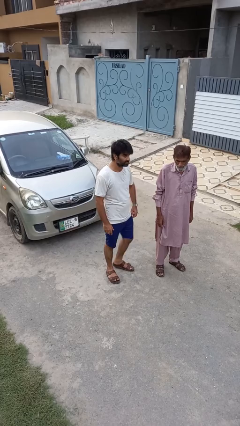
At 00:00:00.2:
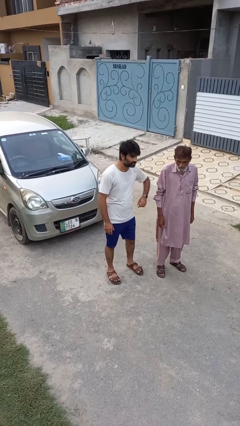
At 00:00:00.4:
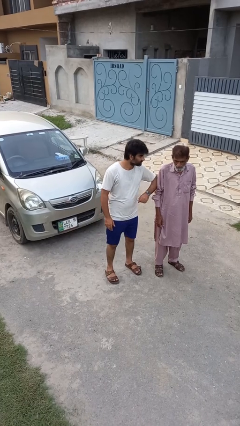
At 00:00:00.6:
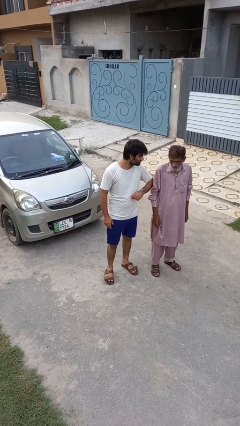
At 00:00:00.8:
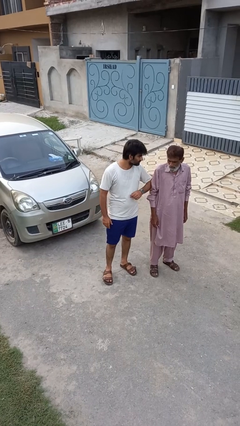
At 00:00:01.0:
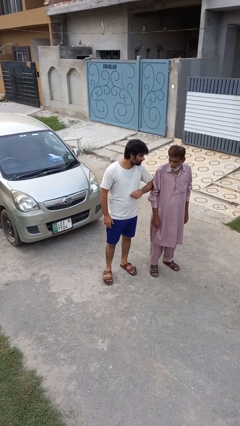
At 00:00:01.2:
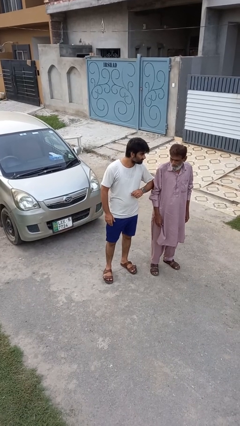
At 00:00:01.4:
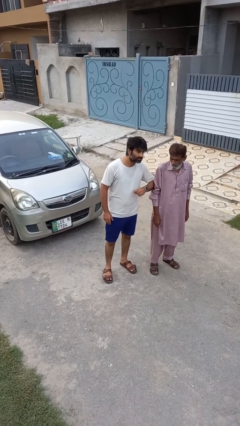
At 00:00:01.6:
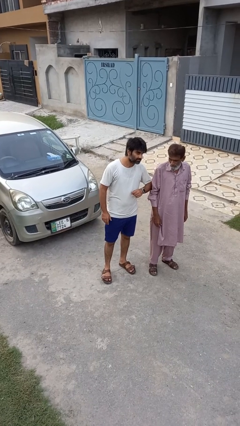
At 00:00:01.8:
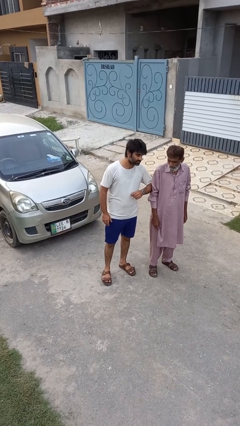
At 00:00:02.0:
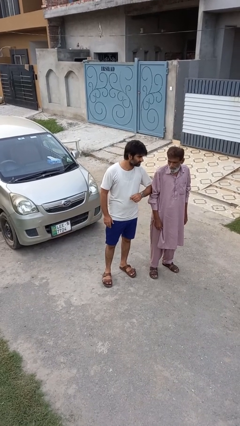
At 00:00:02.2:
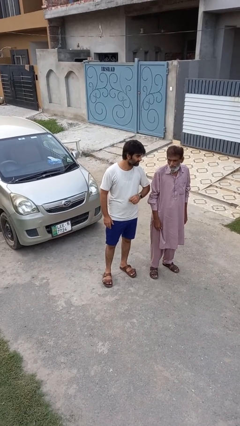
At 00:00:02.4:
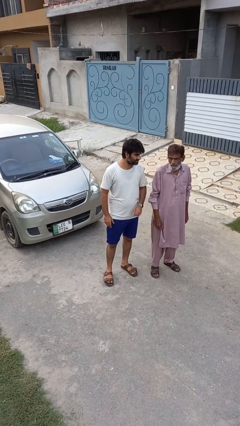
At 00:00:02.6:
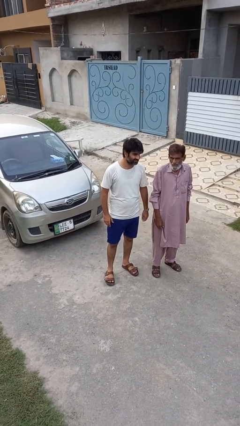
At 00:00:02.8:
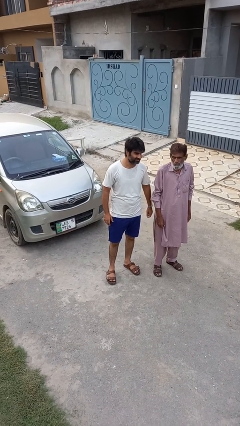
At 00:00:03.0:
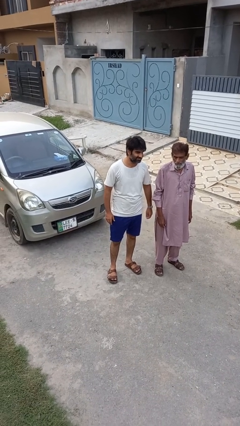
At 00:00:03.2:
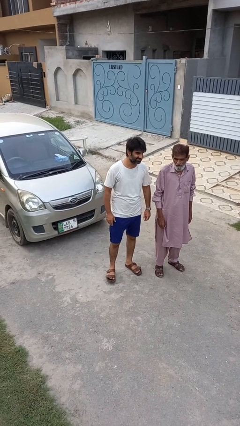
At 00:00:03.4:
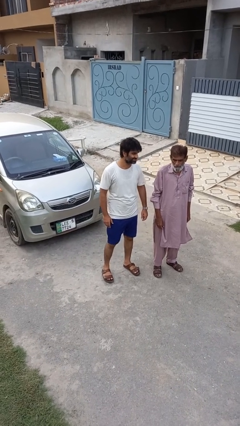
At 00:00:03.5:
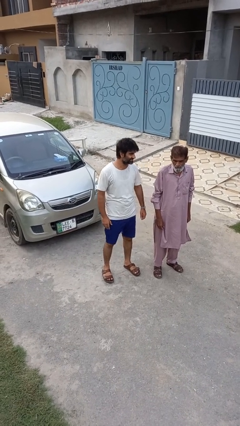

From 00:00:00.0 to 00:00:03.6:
person nudges person with elbow

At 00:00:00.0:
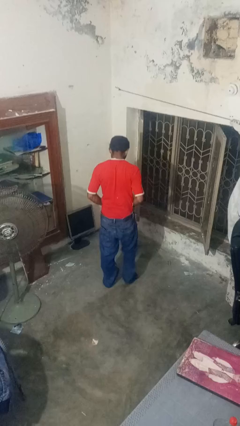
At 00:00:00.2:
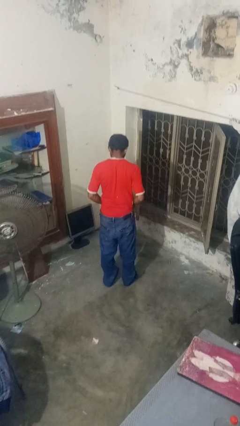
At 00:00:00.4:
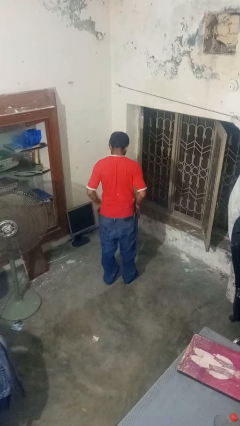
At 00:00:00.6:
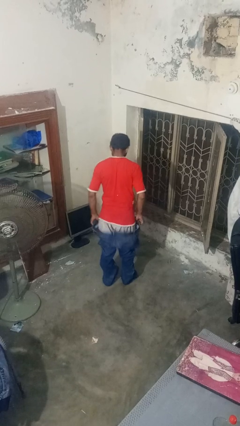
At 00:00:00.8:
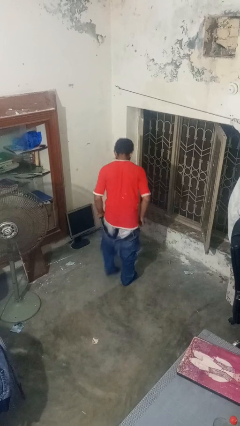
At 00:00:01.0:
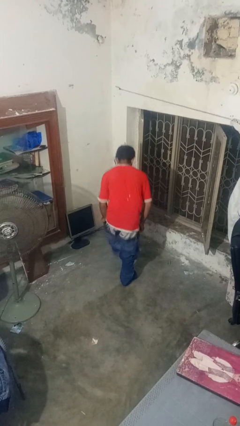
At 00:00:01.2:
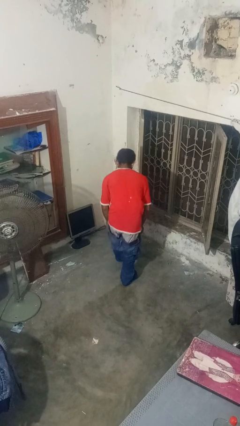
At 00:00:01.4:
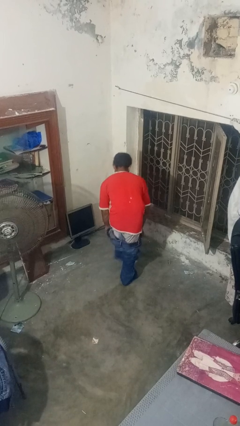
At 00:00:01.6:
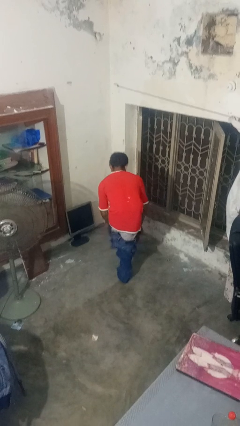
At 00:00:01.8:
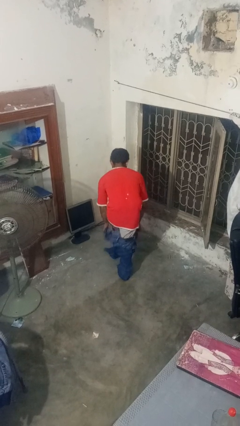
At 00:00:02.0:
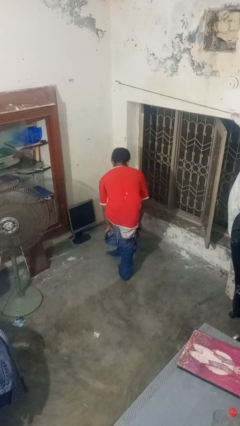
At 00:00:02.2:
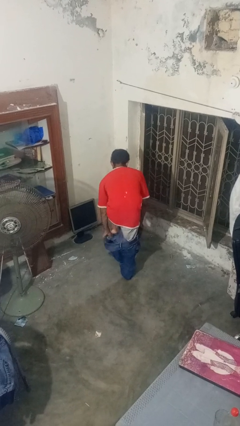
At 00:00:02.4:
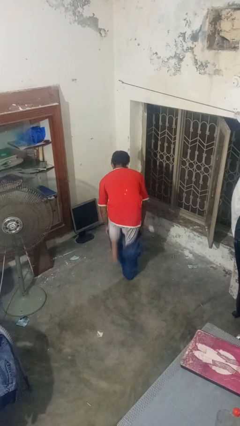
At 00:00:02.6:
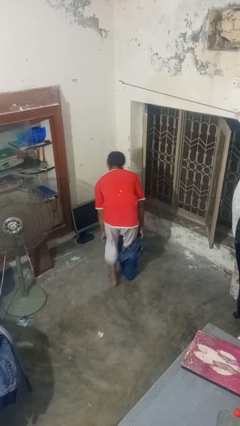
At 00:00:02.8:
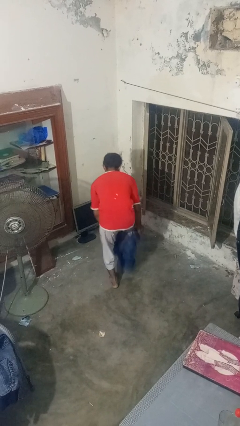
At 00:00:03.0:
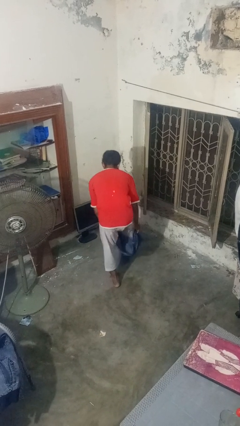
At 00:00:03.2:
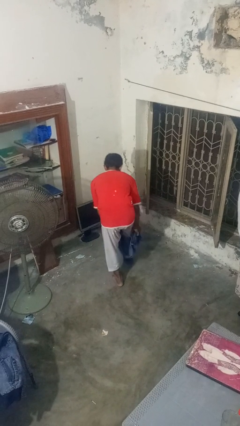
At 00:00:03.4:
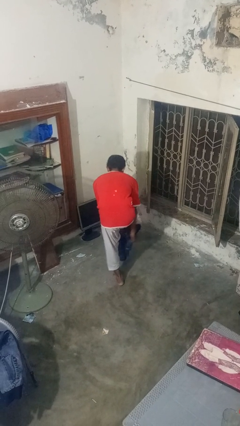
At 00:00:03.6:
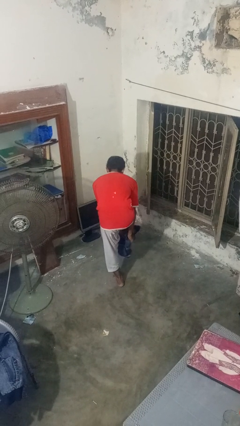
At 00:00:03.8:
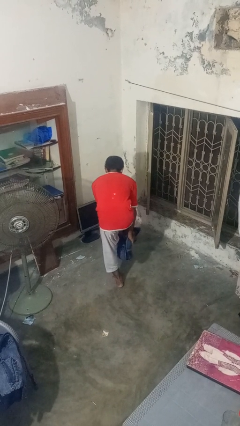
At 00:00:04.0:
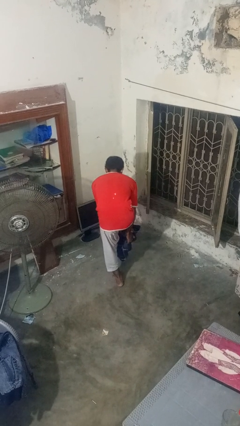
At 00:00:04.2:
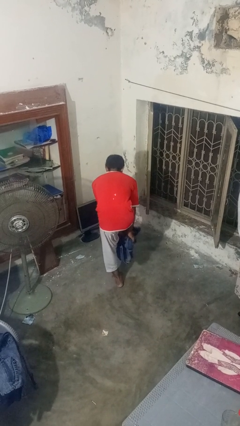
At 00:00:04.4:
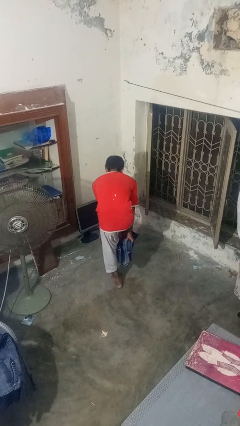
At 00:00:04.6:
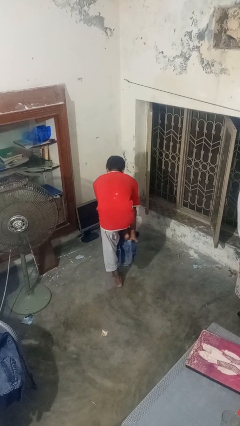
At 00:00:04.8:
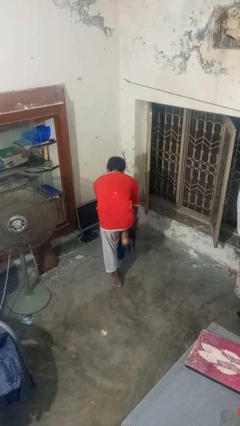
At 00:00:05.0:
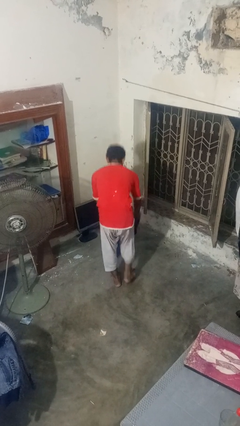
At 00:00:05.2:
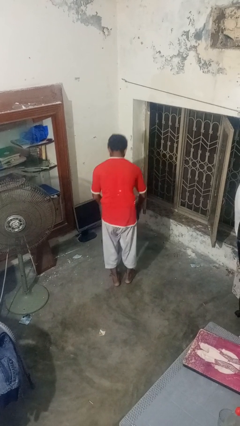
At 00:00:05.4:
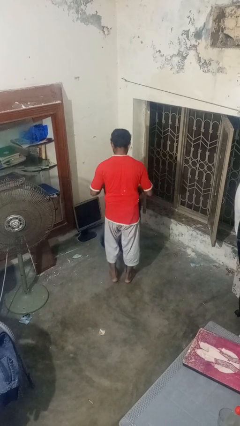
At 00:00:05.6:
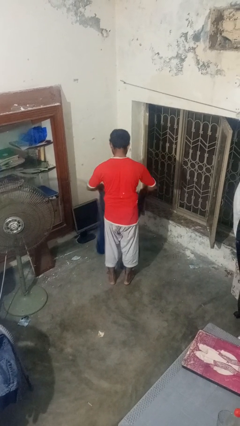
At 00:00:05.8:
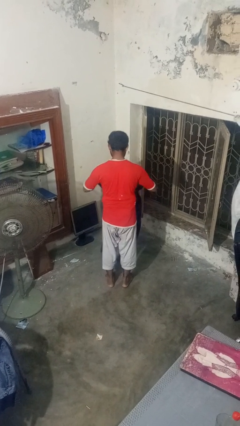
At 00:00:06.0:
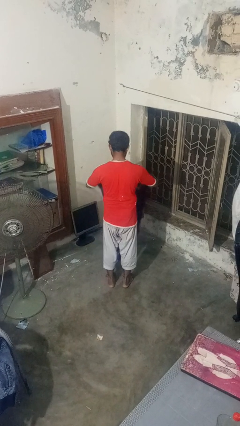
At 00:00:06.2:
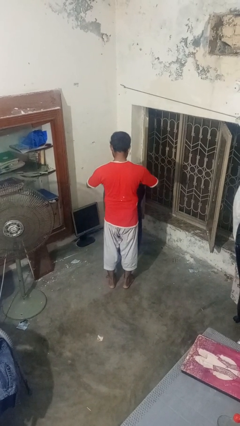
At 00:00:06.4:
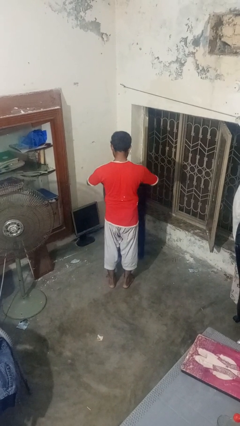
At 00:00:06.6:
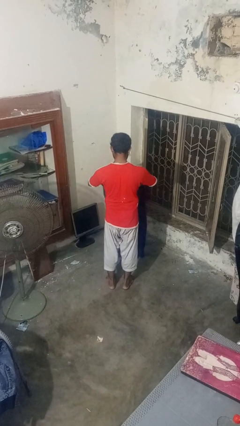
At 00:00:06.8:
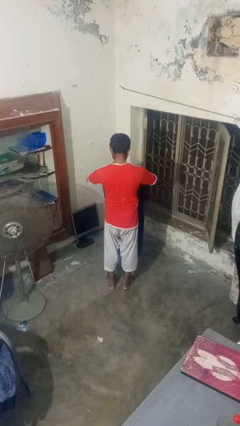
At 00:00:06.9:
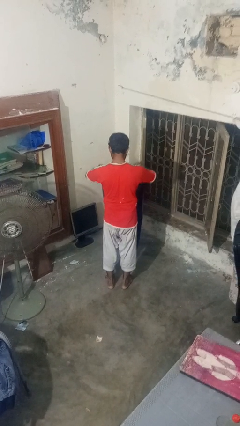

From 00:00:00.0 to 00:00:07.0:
person takes off pants

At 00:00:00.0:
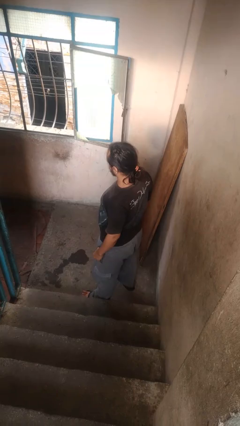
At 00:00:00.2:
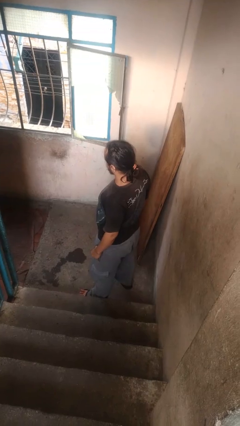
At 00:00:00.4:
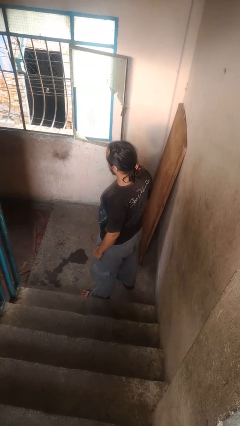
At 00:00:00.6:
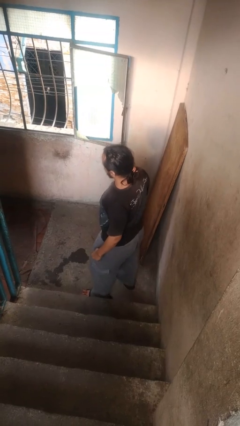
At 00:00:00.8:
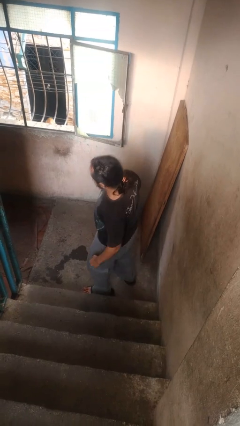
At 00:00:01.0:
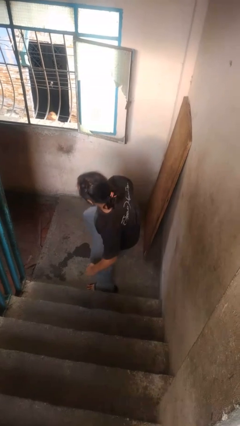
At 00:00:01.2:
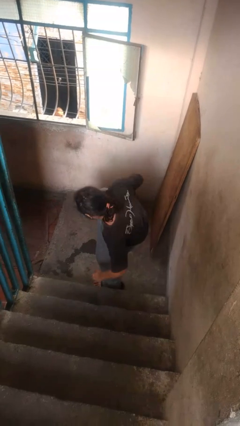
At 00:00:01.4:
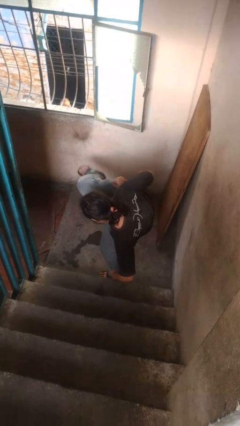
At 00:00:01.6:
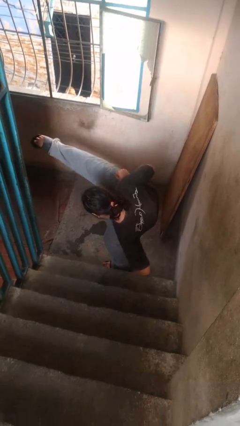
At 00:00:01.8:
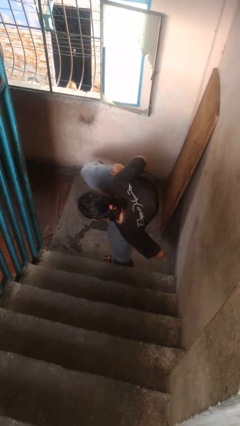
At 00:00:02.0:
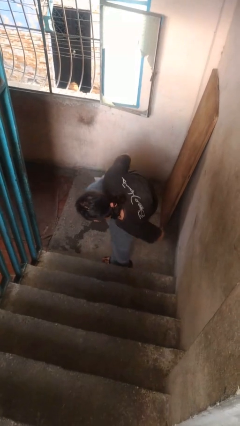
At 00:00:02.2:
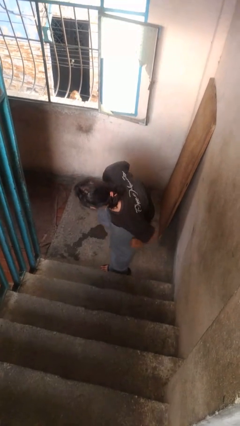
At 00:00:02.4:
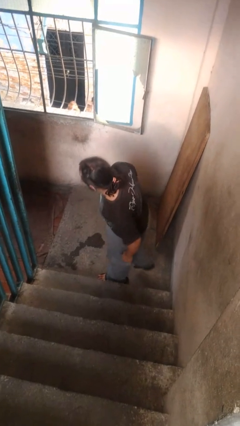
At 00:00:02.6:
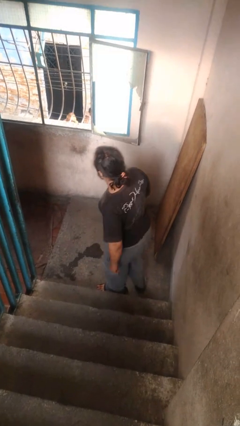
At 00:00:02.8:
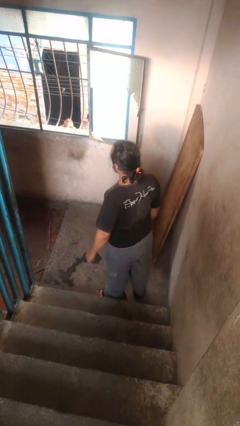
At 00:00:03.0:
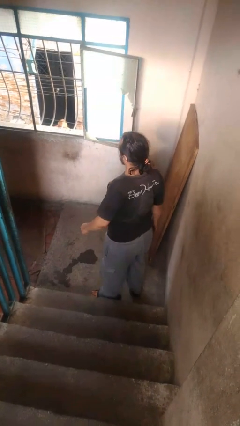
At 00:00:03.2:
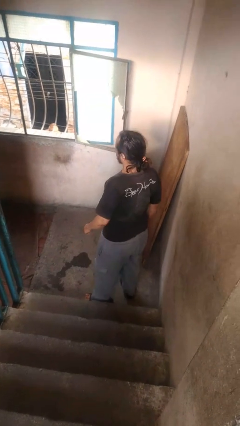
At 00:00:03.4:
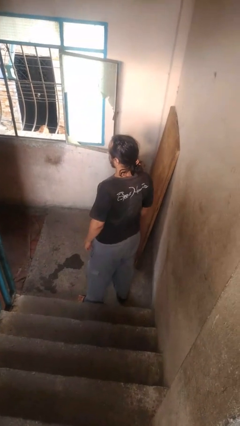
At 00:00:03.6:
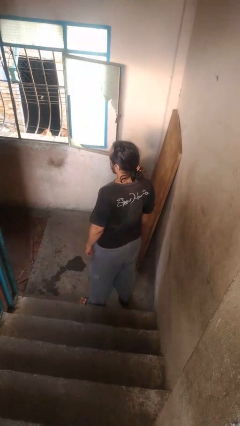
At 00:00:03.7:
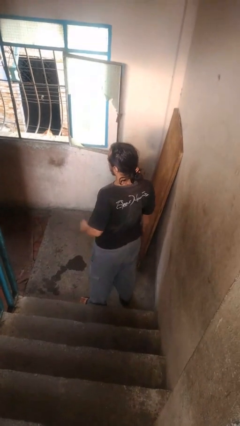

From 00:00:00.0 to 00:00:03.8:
person karate kicks

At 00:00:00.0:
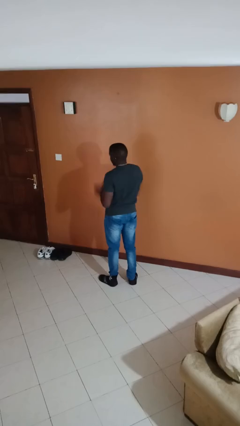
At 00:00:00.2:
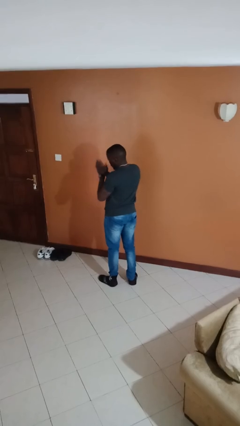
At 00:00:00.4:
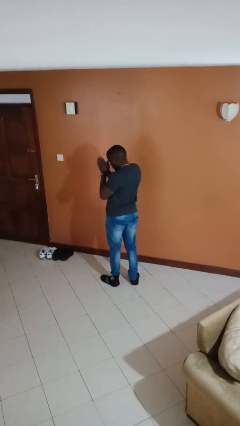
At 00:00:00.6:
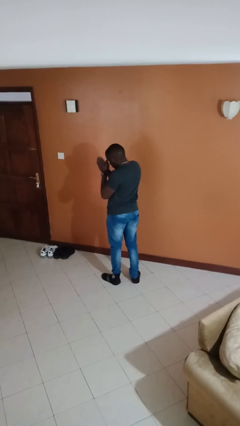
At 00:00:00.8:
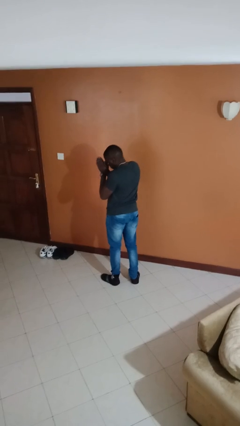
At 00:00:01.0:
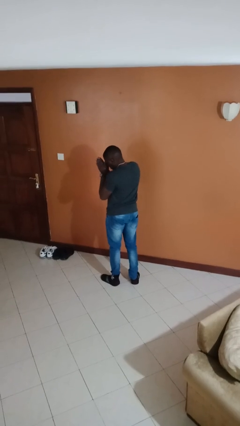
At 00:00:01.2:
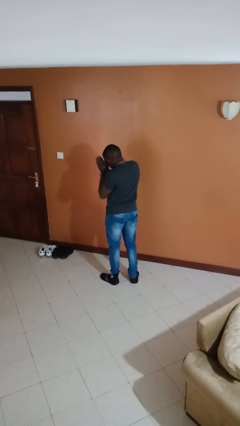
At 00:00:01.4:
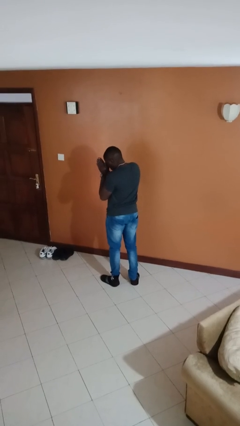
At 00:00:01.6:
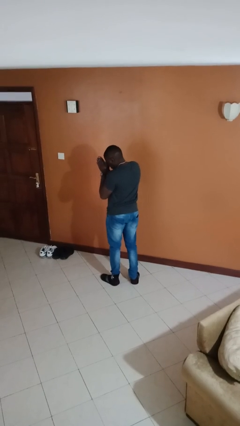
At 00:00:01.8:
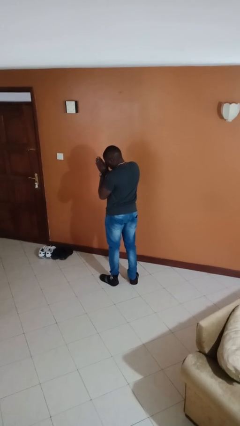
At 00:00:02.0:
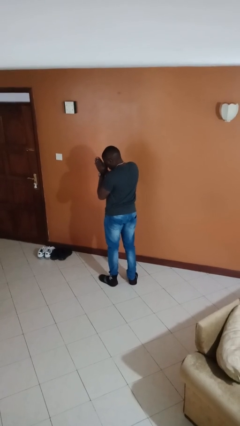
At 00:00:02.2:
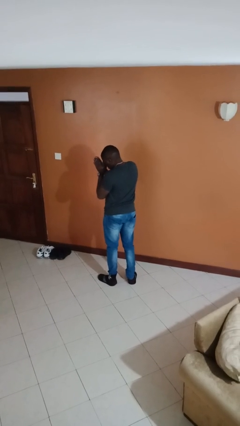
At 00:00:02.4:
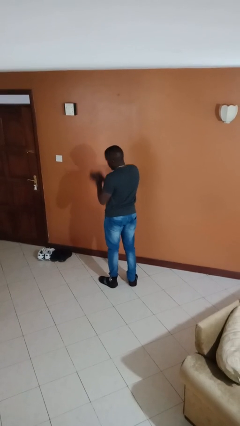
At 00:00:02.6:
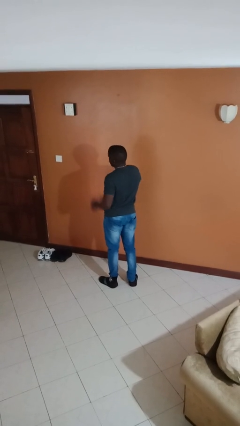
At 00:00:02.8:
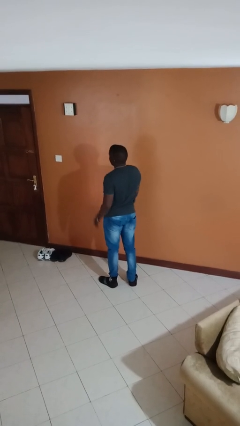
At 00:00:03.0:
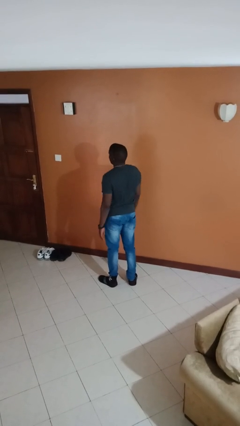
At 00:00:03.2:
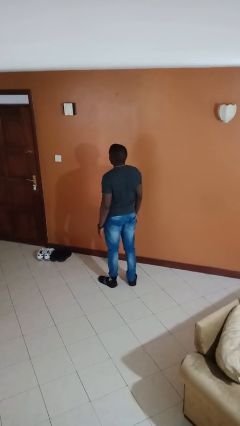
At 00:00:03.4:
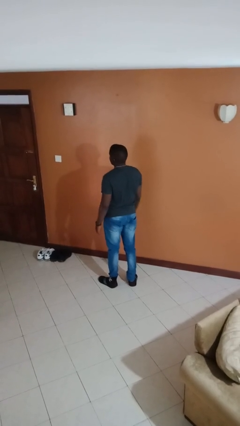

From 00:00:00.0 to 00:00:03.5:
person prays
